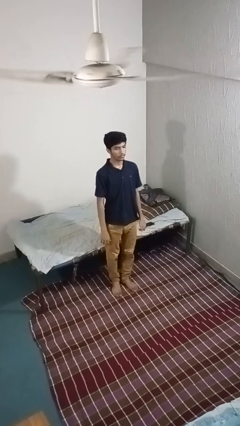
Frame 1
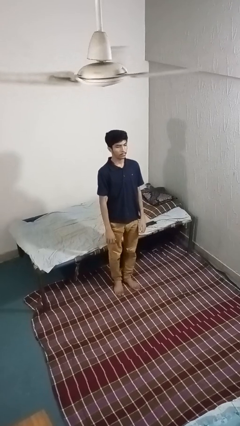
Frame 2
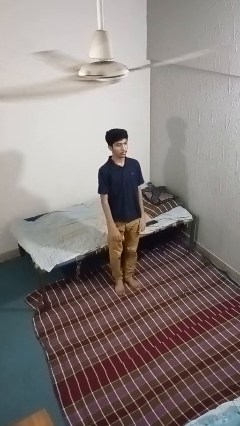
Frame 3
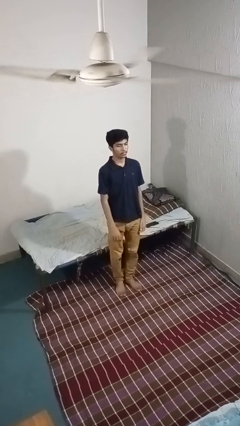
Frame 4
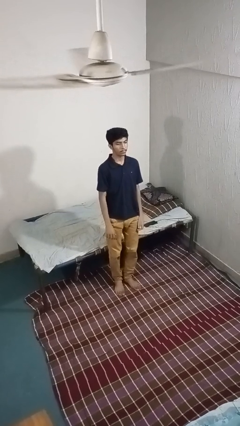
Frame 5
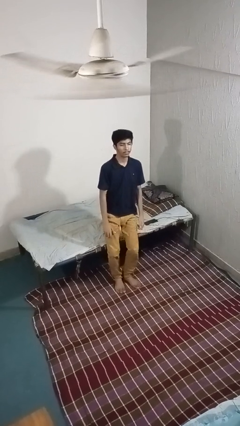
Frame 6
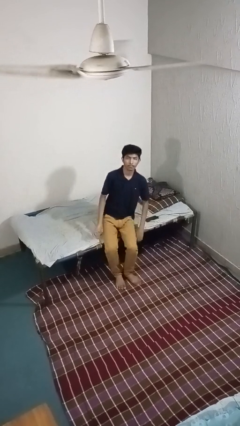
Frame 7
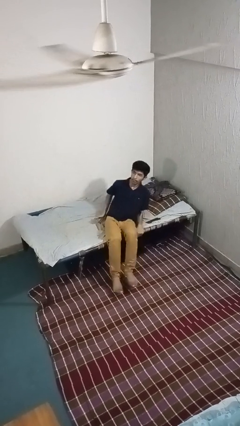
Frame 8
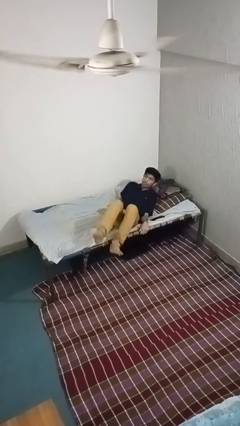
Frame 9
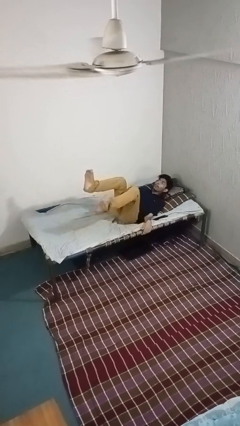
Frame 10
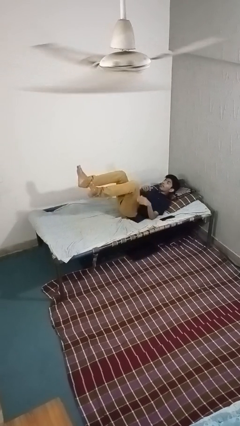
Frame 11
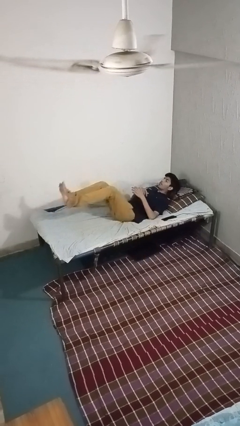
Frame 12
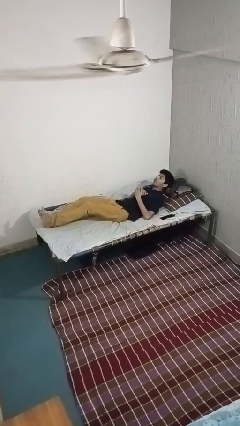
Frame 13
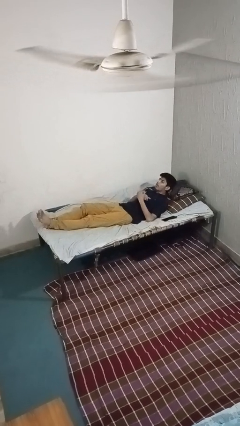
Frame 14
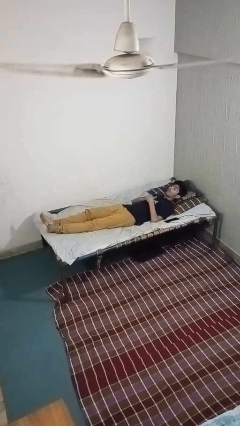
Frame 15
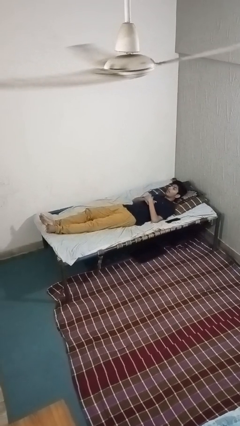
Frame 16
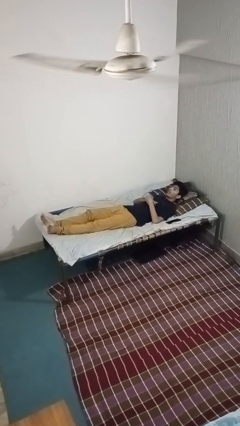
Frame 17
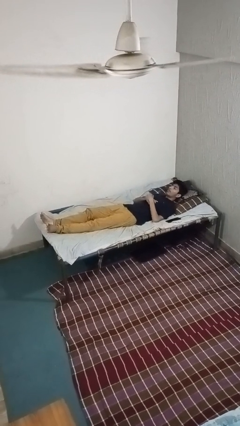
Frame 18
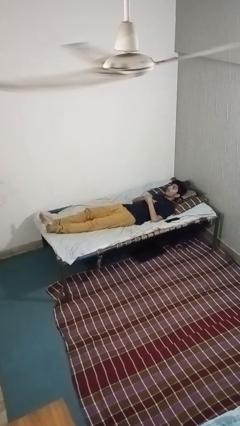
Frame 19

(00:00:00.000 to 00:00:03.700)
person lies down on bed

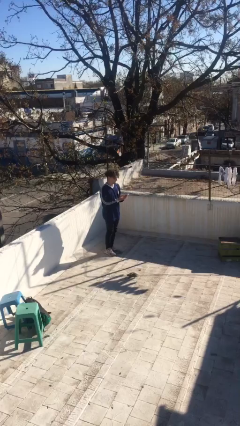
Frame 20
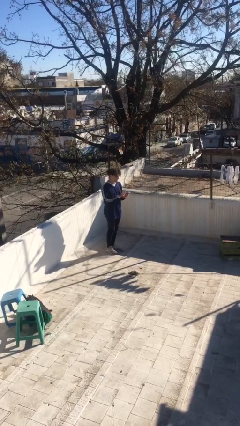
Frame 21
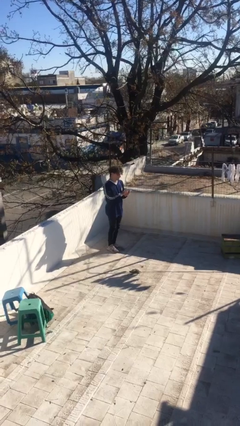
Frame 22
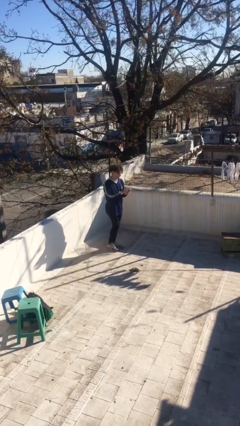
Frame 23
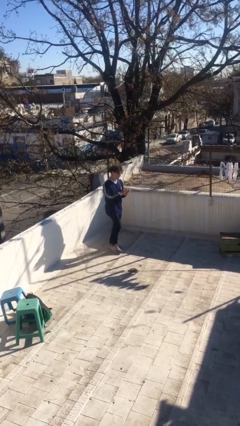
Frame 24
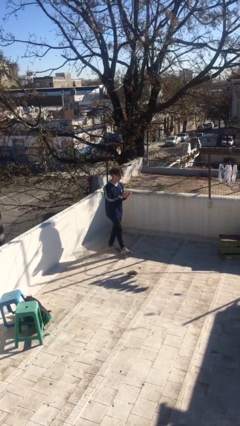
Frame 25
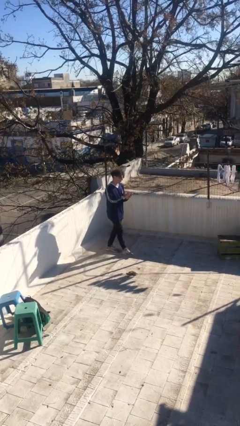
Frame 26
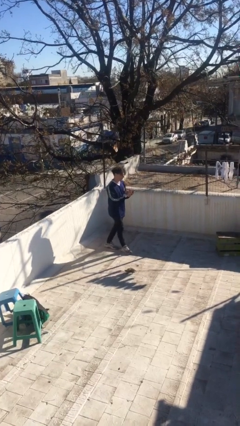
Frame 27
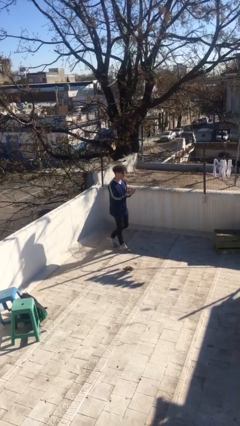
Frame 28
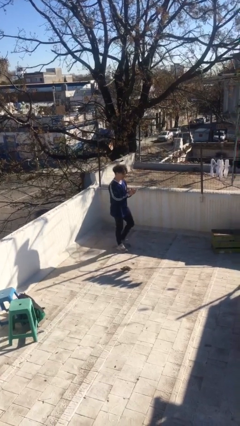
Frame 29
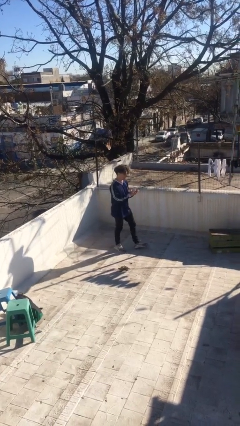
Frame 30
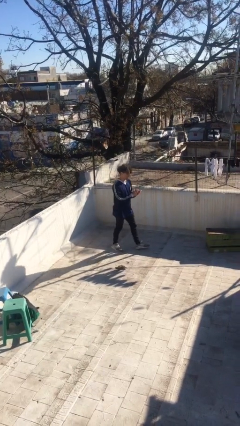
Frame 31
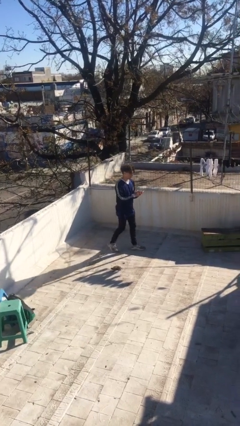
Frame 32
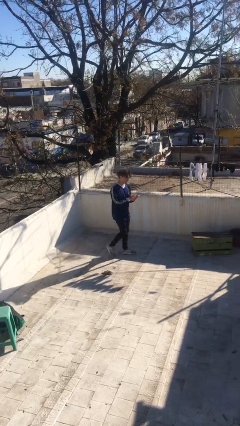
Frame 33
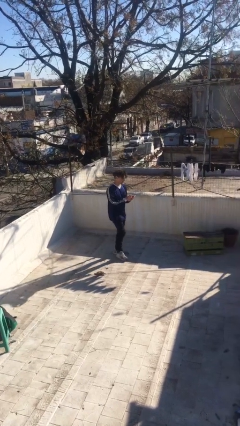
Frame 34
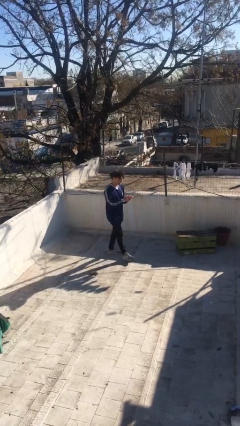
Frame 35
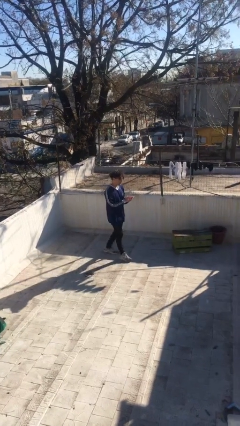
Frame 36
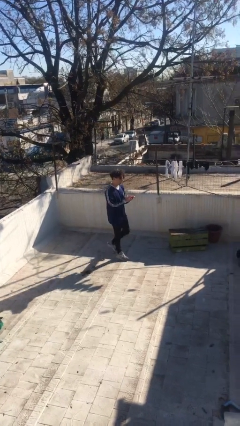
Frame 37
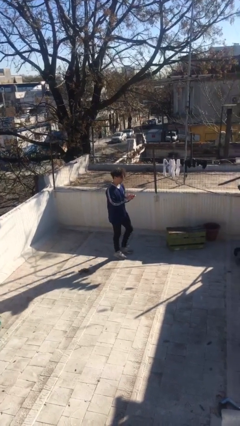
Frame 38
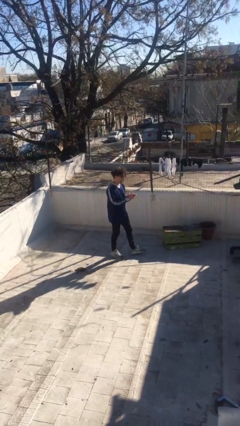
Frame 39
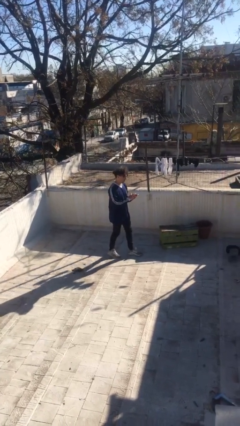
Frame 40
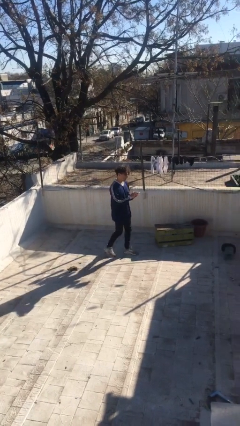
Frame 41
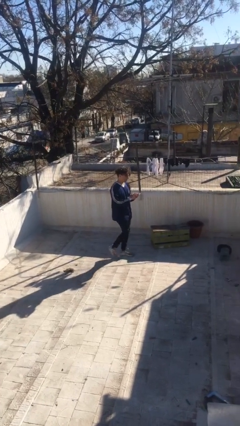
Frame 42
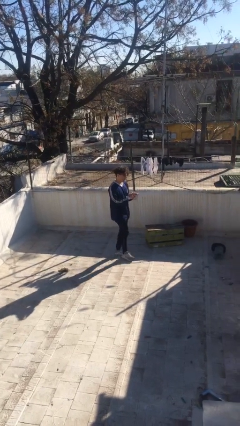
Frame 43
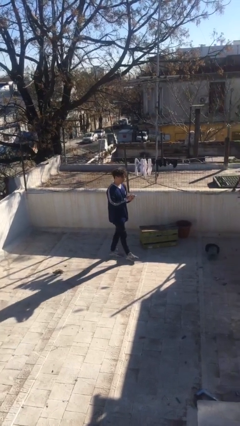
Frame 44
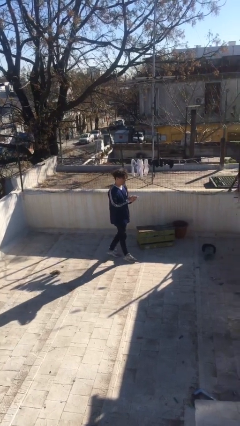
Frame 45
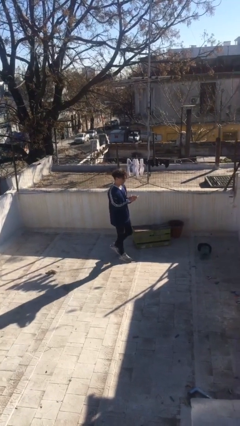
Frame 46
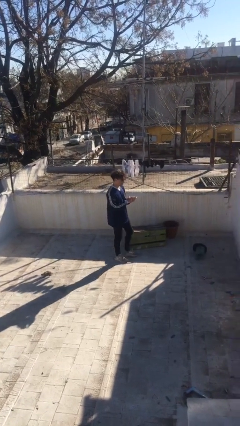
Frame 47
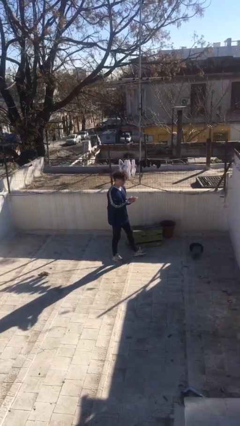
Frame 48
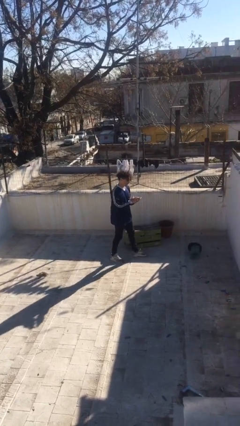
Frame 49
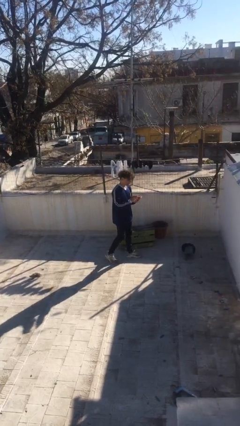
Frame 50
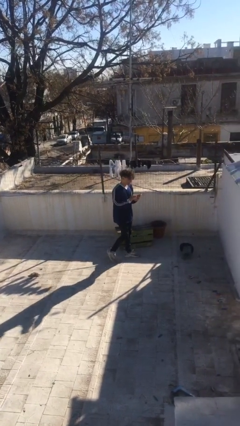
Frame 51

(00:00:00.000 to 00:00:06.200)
person texts on phone

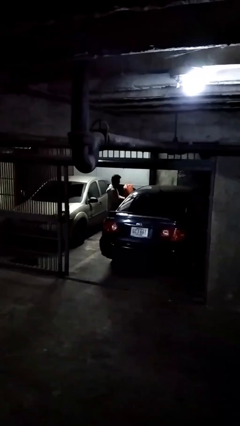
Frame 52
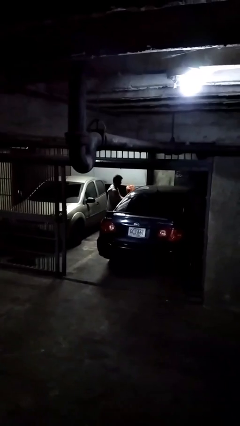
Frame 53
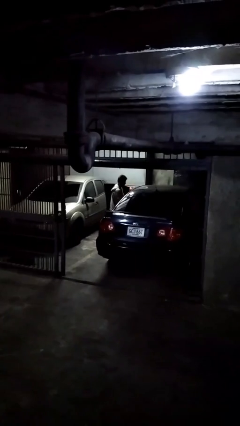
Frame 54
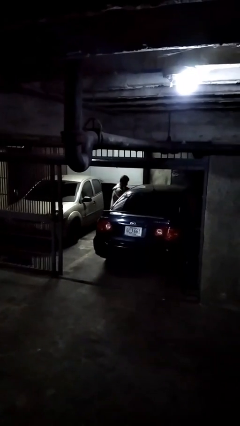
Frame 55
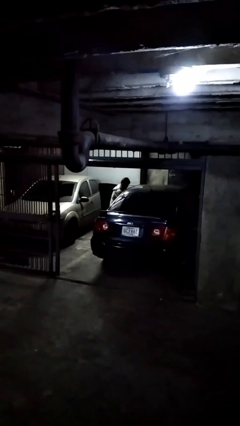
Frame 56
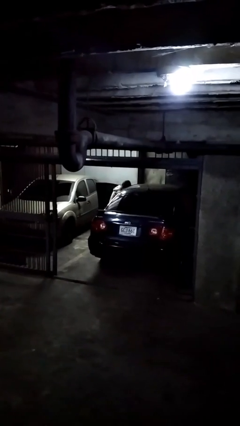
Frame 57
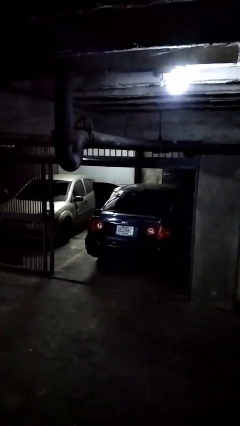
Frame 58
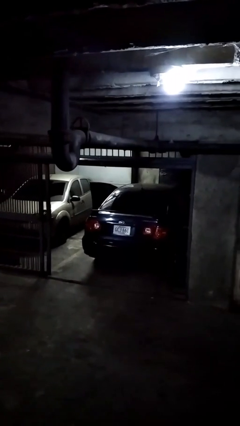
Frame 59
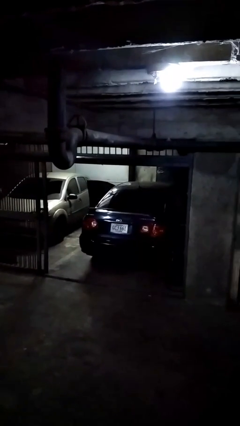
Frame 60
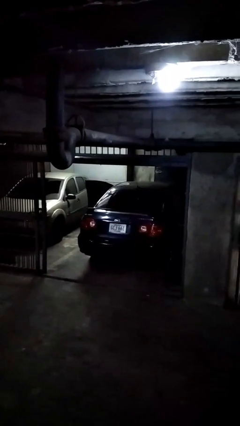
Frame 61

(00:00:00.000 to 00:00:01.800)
person loads car

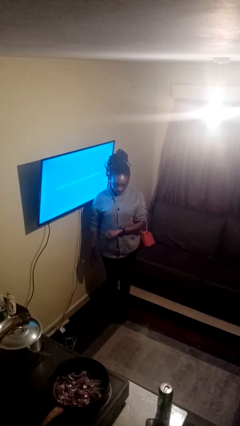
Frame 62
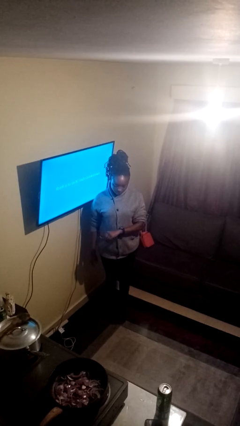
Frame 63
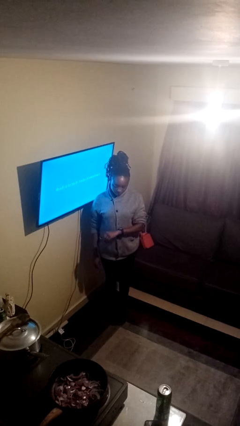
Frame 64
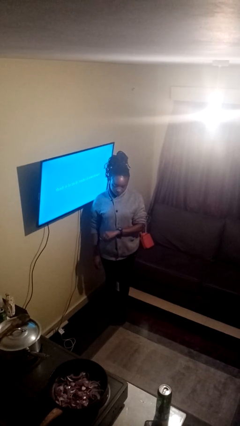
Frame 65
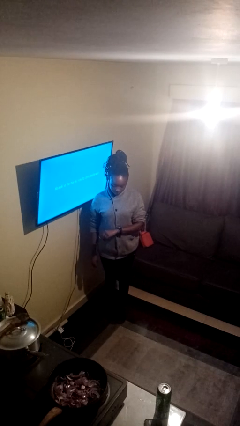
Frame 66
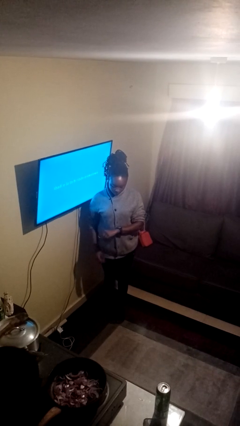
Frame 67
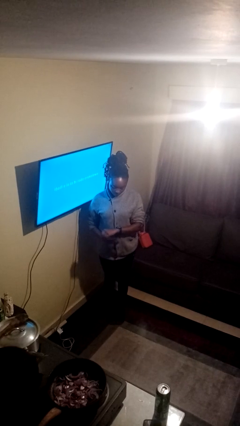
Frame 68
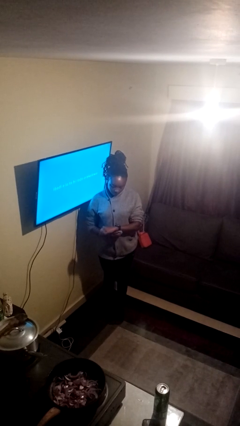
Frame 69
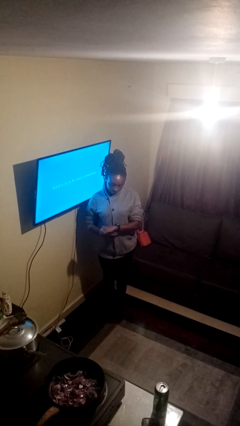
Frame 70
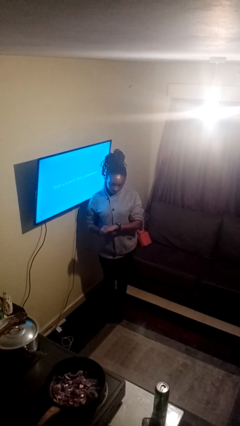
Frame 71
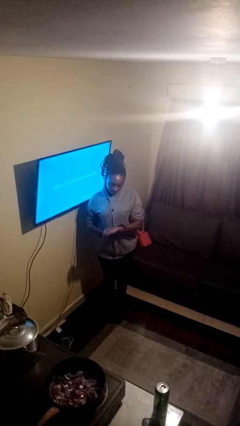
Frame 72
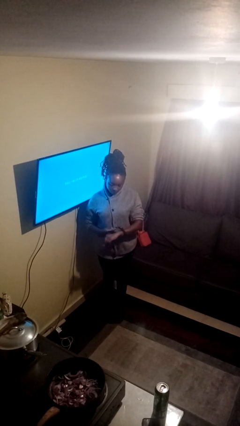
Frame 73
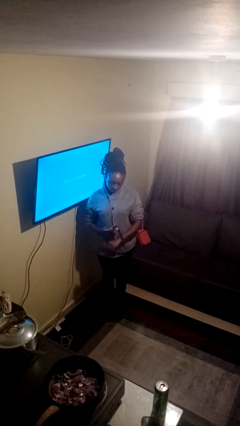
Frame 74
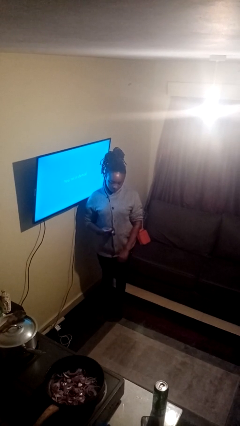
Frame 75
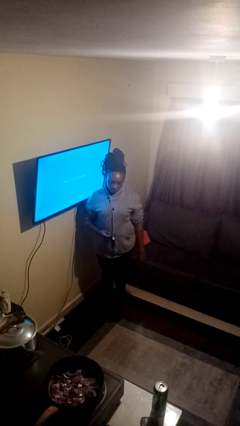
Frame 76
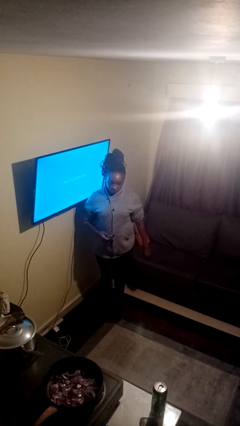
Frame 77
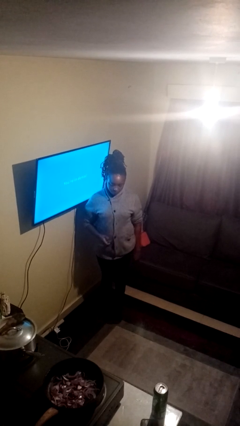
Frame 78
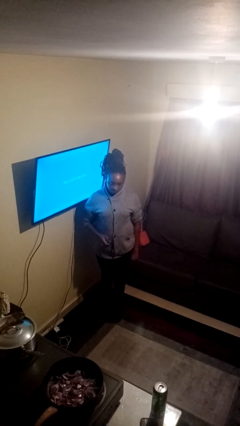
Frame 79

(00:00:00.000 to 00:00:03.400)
person takes off wristwatch

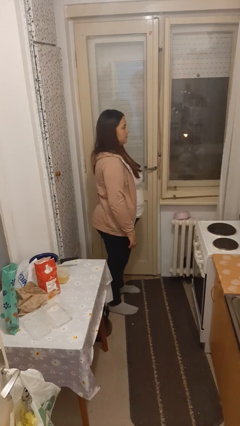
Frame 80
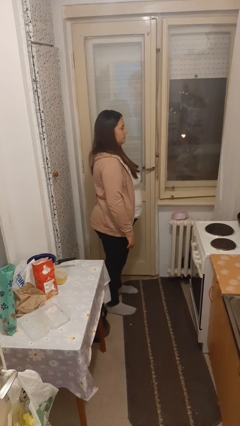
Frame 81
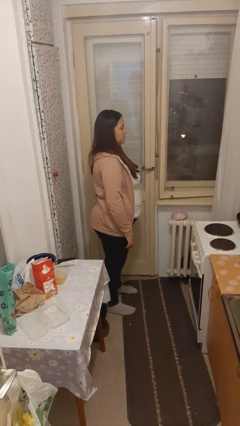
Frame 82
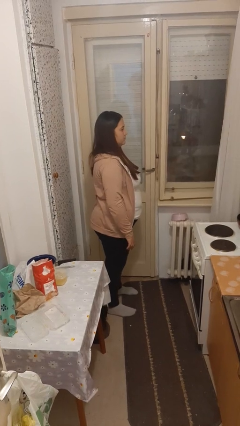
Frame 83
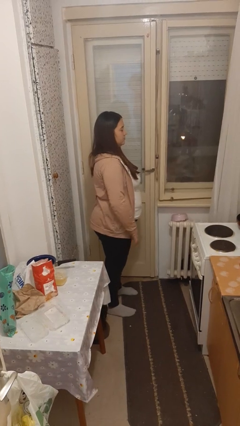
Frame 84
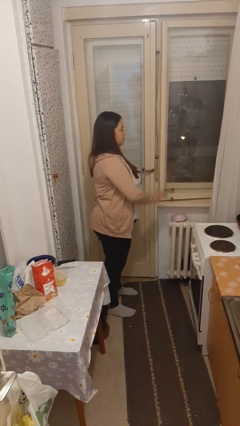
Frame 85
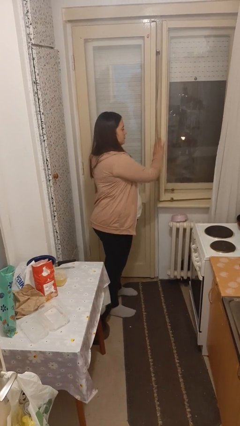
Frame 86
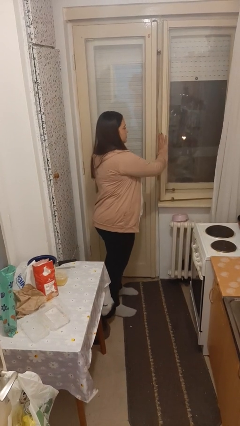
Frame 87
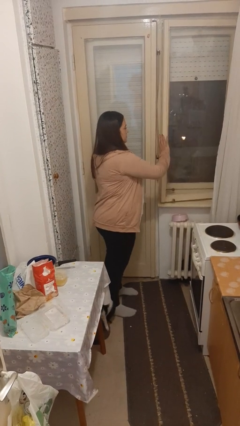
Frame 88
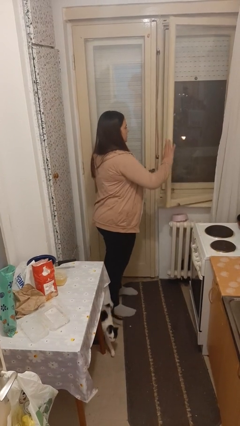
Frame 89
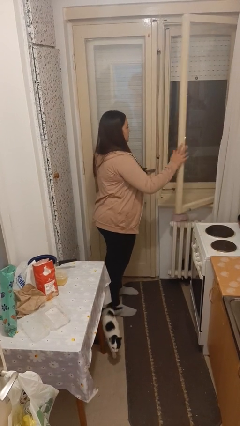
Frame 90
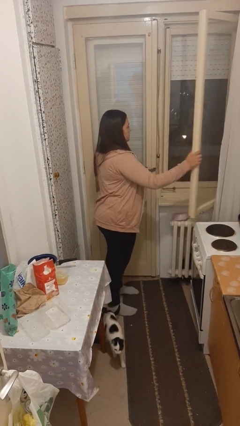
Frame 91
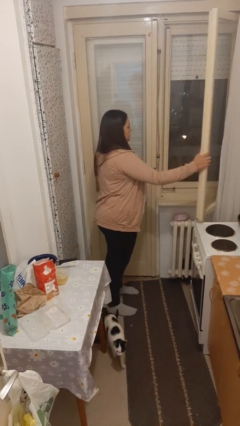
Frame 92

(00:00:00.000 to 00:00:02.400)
person opens home window
